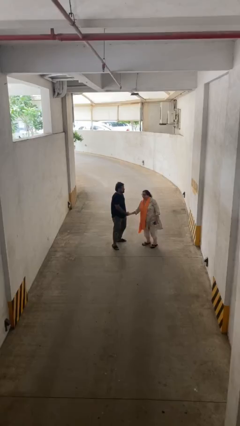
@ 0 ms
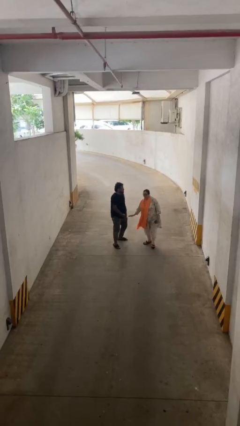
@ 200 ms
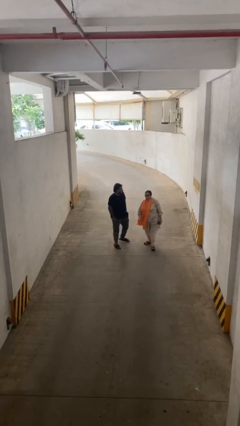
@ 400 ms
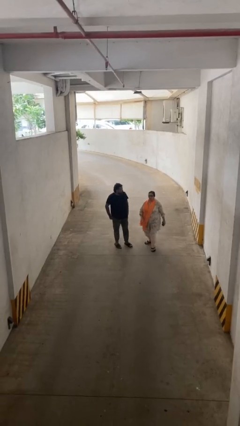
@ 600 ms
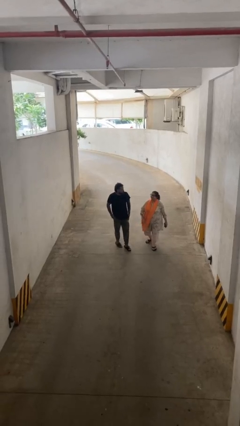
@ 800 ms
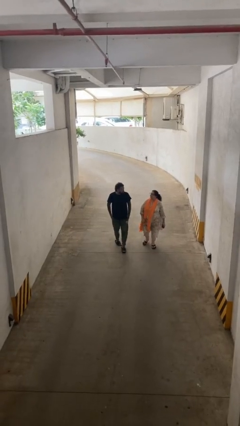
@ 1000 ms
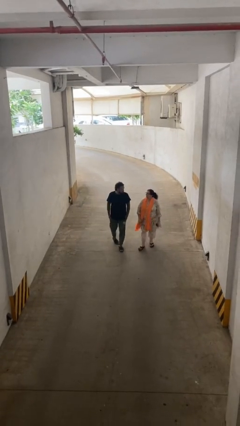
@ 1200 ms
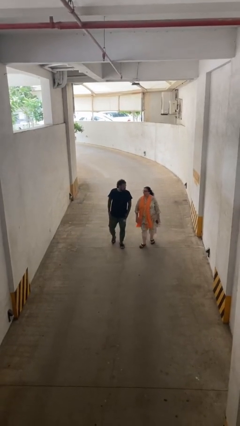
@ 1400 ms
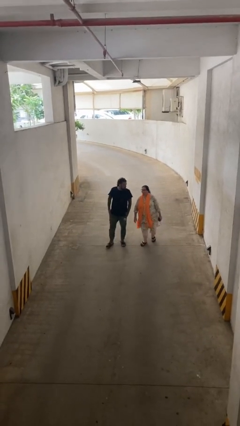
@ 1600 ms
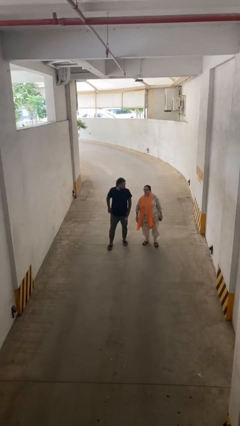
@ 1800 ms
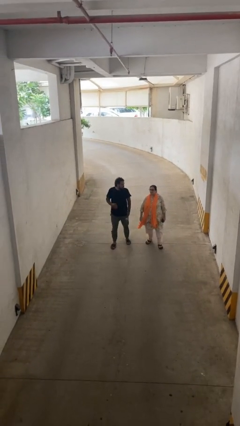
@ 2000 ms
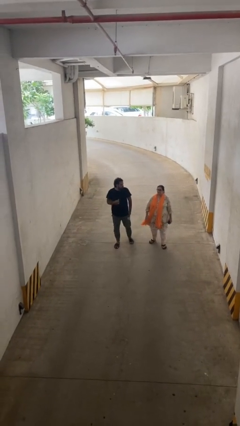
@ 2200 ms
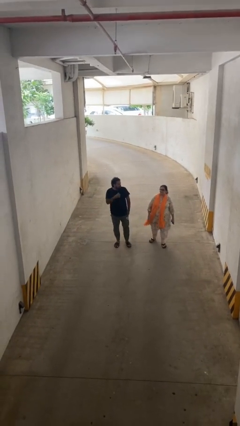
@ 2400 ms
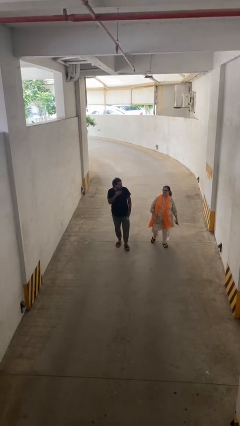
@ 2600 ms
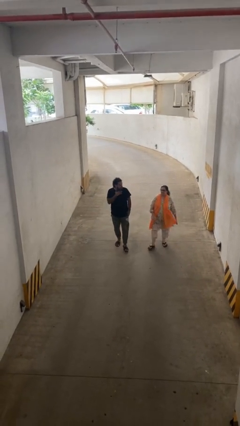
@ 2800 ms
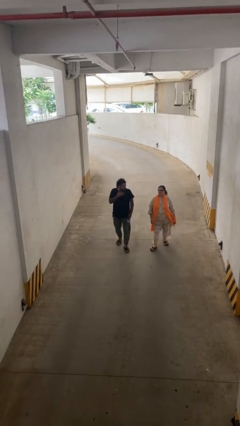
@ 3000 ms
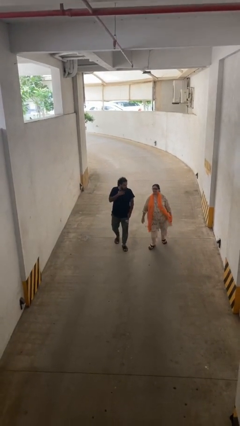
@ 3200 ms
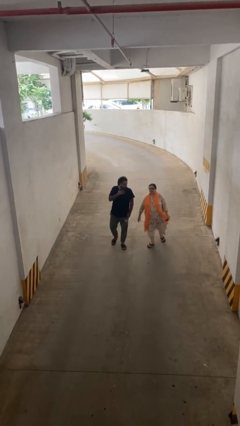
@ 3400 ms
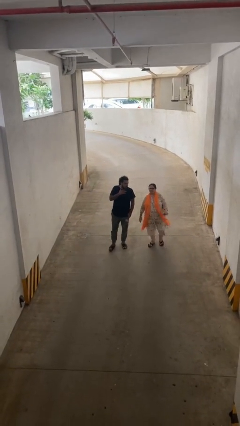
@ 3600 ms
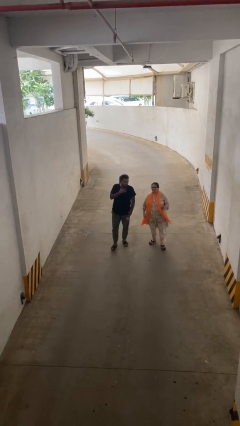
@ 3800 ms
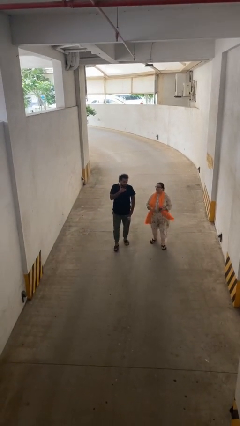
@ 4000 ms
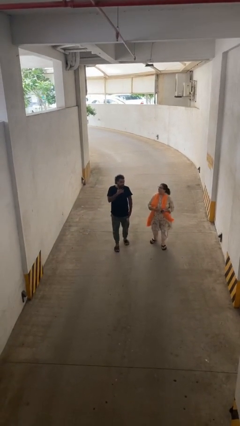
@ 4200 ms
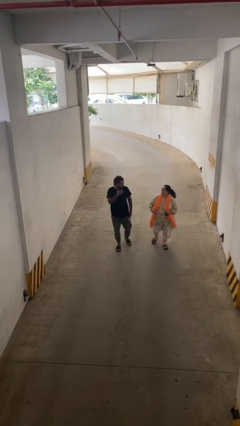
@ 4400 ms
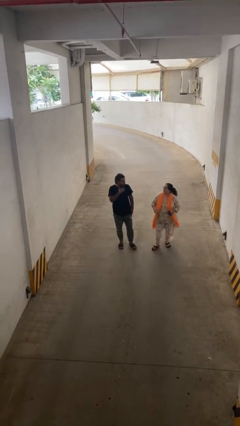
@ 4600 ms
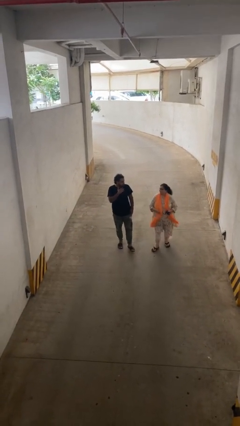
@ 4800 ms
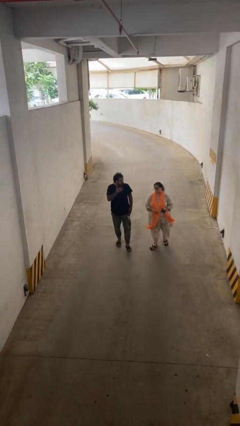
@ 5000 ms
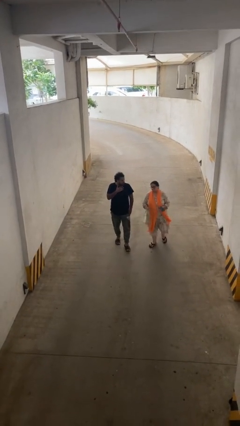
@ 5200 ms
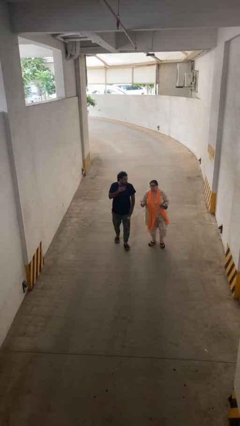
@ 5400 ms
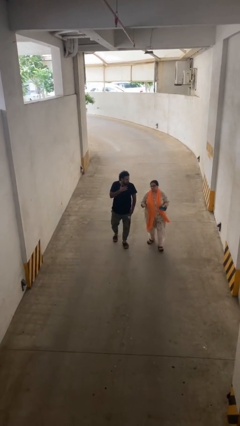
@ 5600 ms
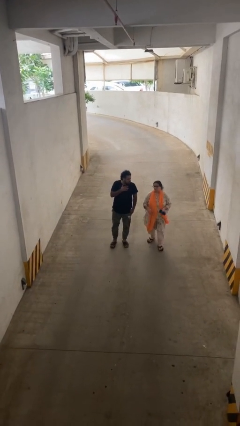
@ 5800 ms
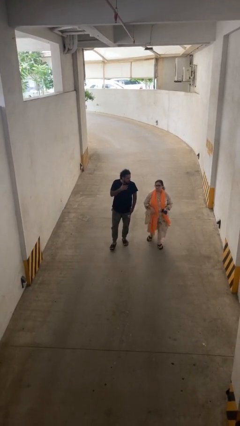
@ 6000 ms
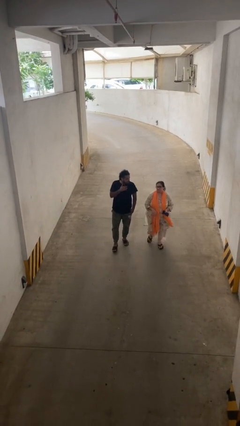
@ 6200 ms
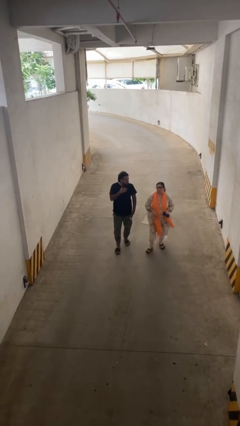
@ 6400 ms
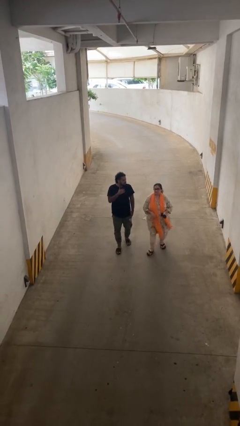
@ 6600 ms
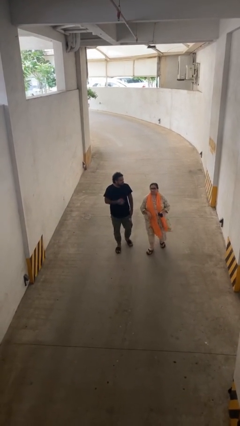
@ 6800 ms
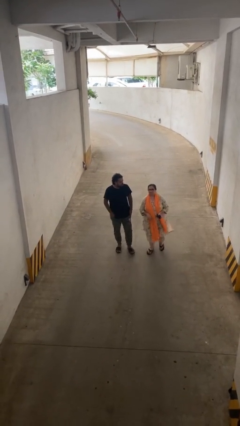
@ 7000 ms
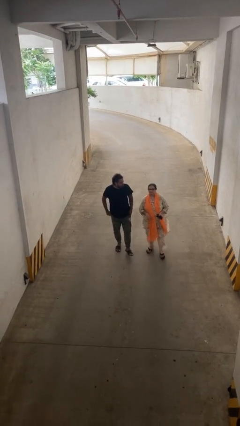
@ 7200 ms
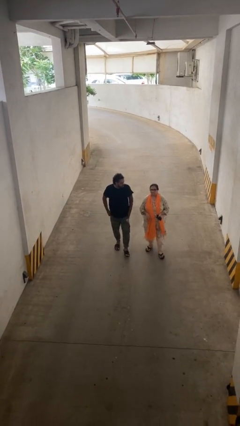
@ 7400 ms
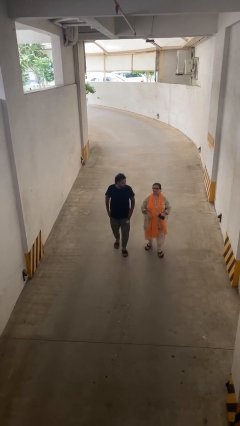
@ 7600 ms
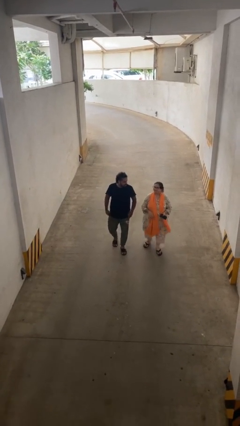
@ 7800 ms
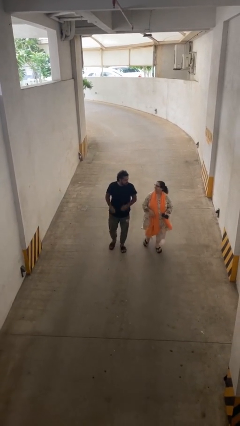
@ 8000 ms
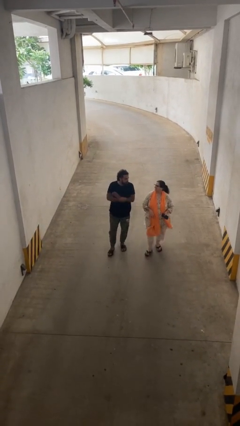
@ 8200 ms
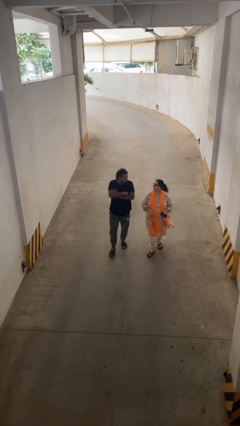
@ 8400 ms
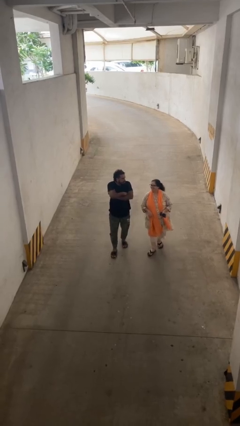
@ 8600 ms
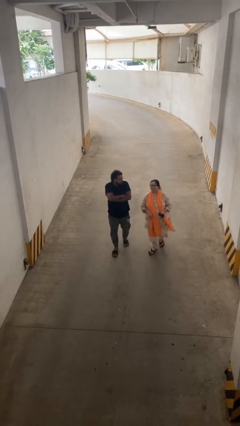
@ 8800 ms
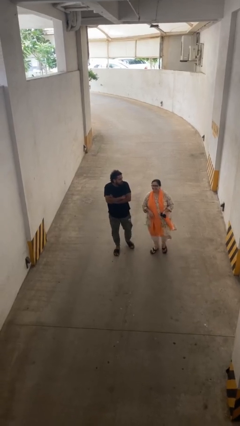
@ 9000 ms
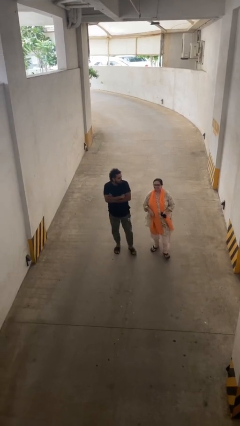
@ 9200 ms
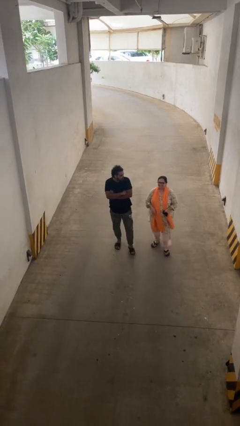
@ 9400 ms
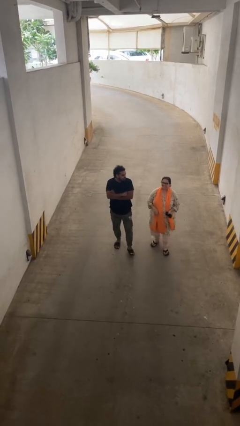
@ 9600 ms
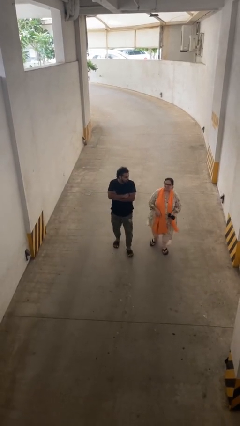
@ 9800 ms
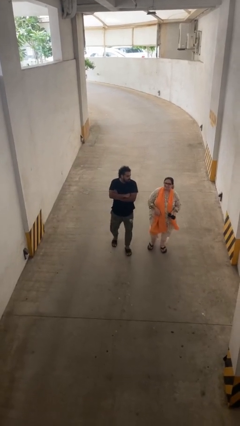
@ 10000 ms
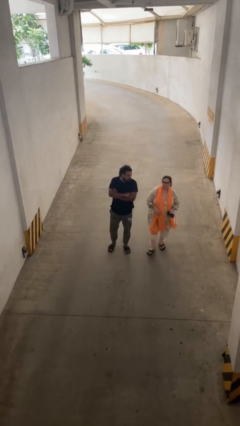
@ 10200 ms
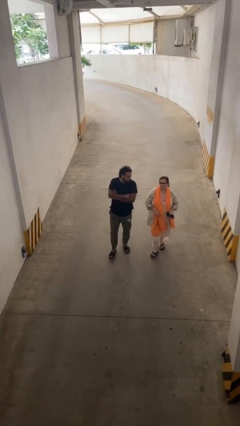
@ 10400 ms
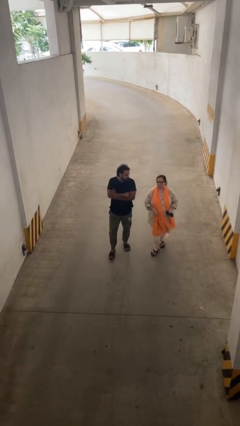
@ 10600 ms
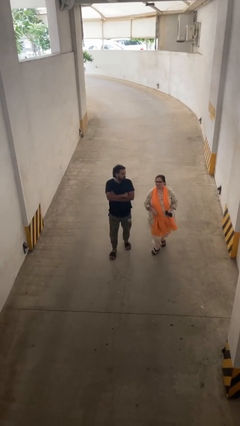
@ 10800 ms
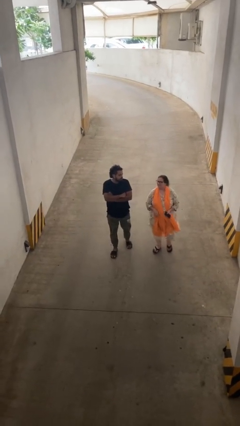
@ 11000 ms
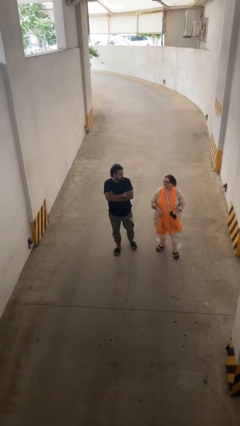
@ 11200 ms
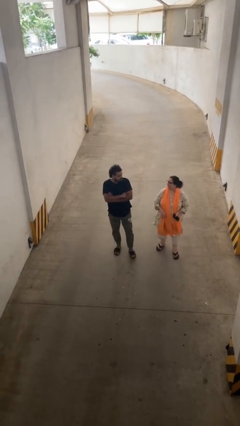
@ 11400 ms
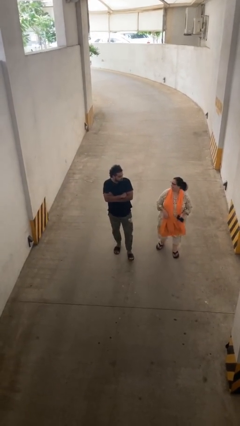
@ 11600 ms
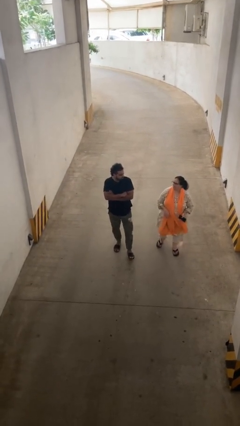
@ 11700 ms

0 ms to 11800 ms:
person talks to person

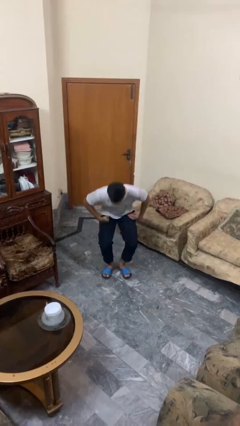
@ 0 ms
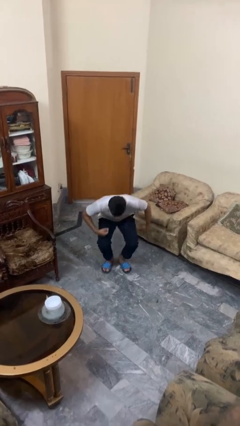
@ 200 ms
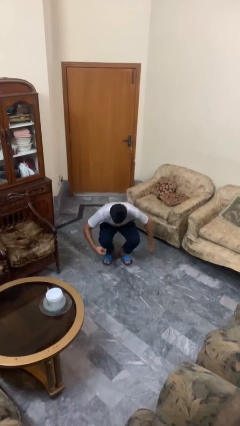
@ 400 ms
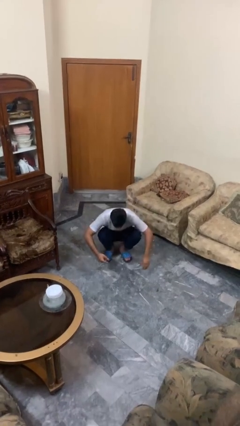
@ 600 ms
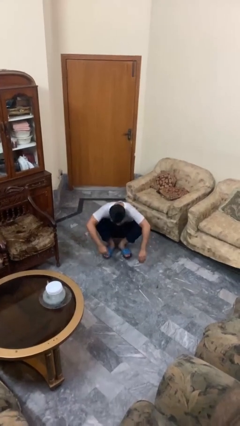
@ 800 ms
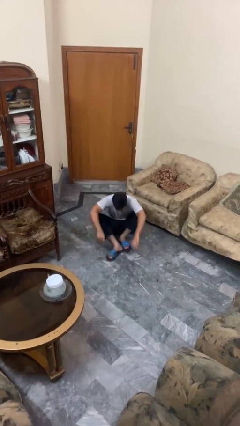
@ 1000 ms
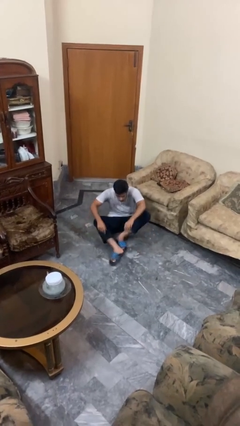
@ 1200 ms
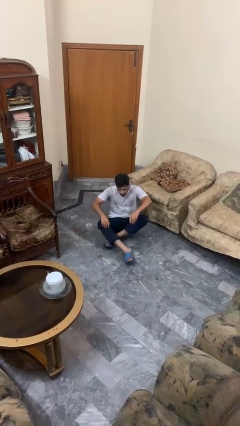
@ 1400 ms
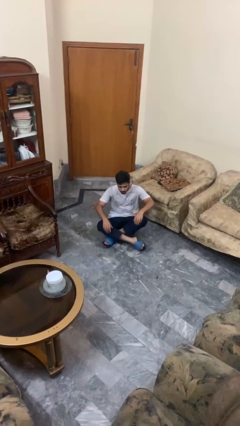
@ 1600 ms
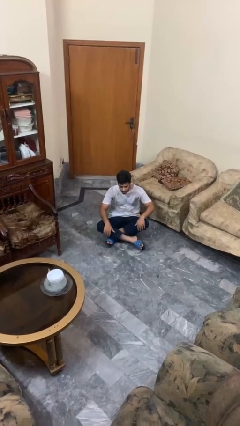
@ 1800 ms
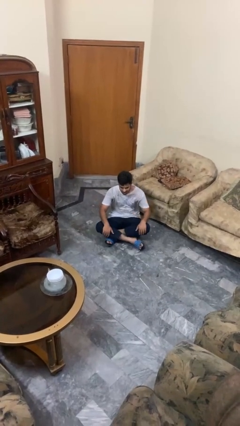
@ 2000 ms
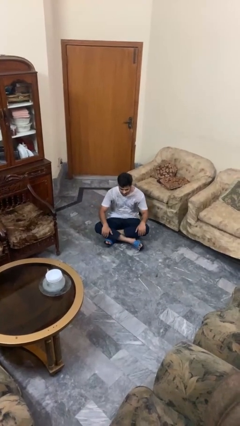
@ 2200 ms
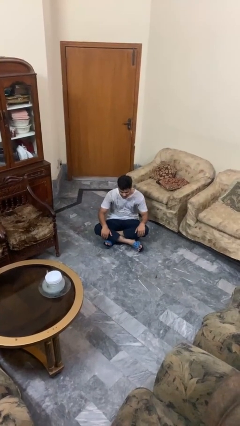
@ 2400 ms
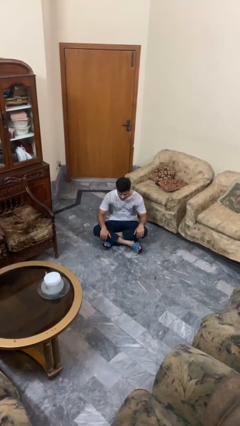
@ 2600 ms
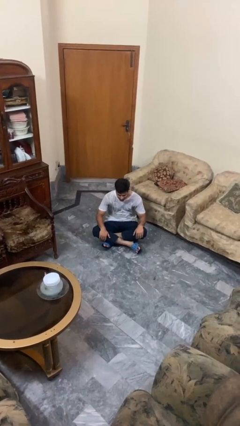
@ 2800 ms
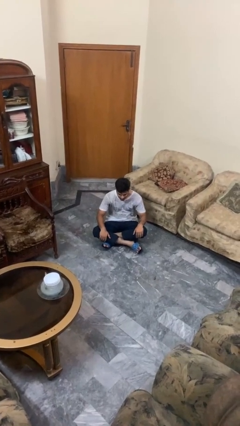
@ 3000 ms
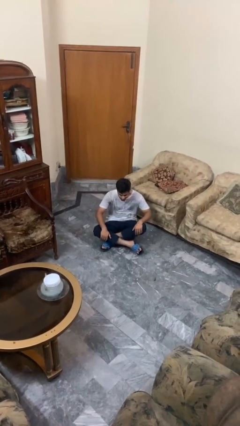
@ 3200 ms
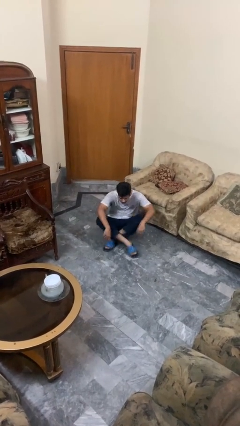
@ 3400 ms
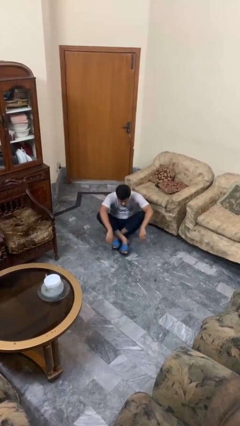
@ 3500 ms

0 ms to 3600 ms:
person sits crisscross

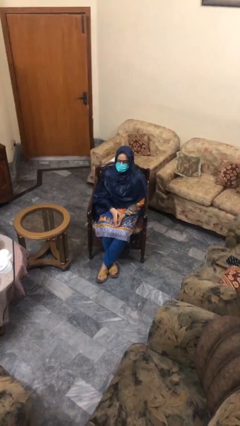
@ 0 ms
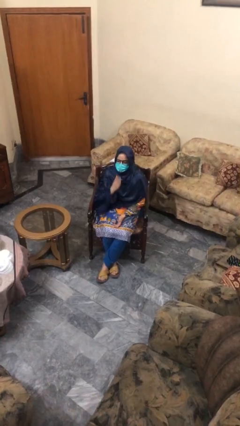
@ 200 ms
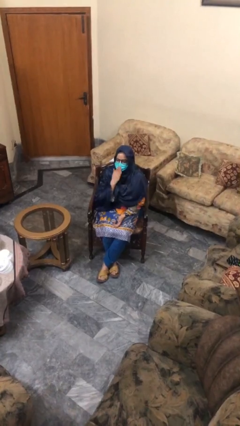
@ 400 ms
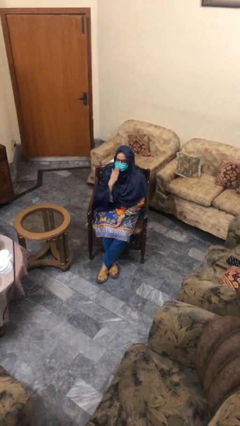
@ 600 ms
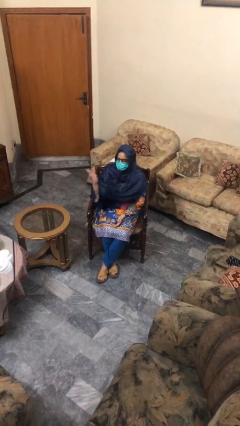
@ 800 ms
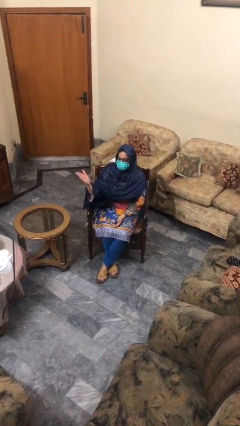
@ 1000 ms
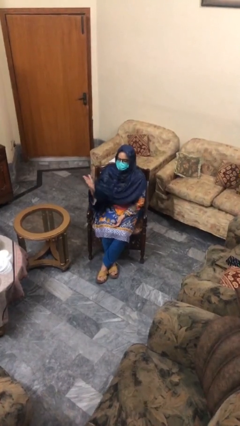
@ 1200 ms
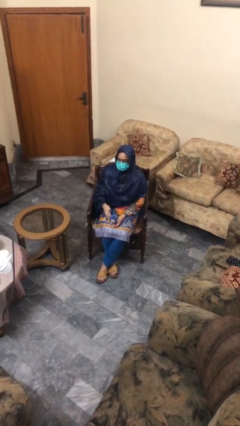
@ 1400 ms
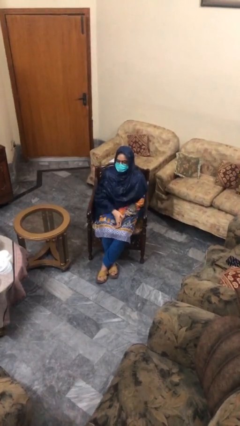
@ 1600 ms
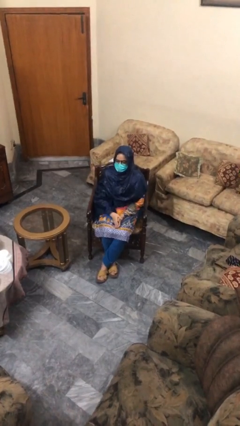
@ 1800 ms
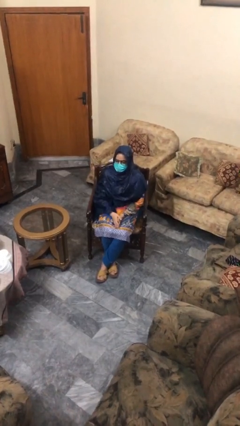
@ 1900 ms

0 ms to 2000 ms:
person gestures blow kiss

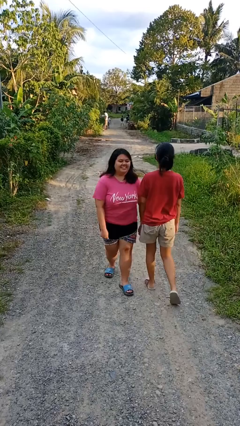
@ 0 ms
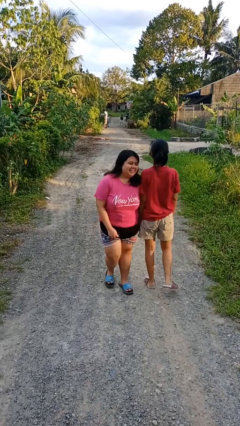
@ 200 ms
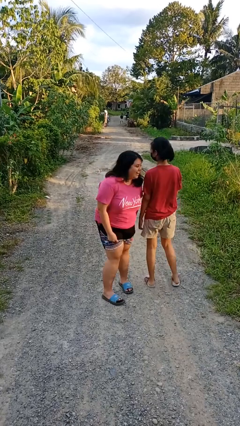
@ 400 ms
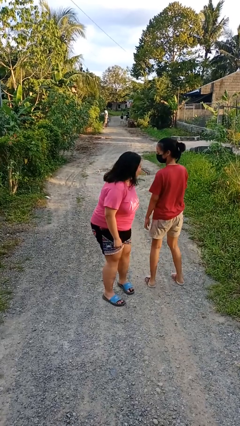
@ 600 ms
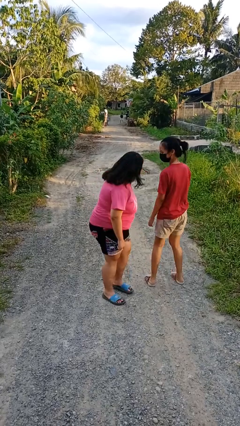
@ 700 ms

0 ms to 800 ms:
person bumps into person
